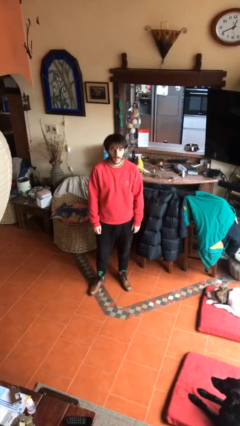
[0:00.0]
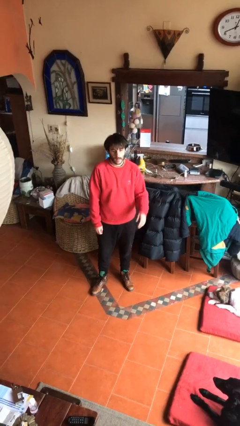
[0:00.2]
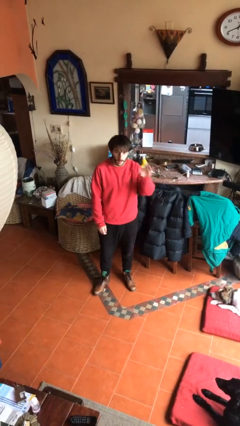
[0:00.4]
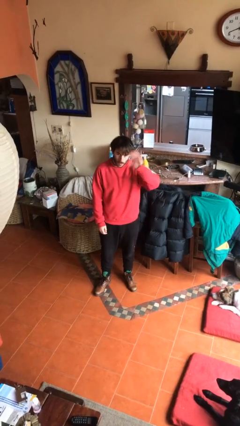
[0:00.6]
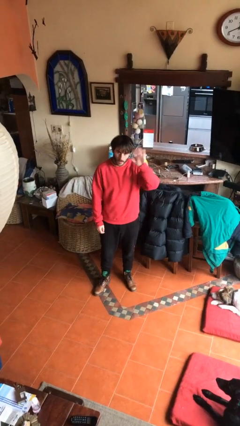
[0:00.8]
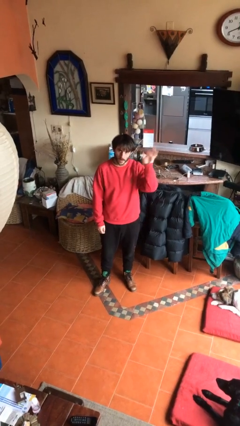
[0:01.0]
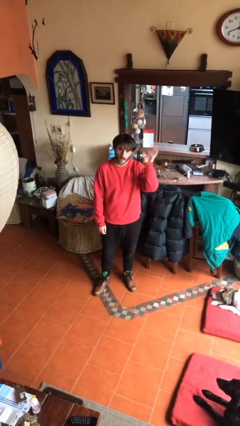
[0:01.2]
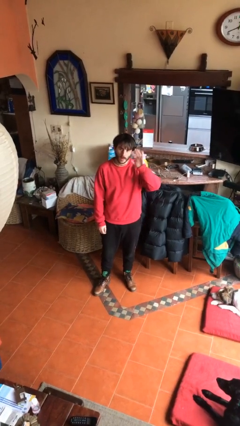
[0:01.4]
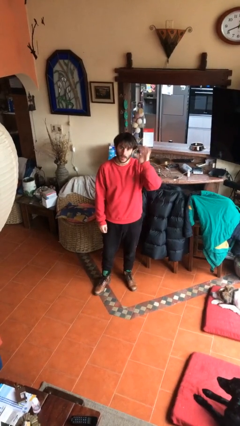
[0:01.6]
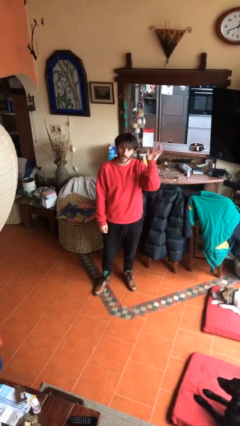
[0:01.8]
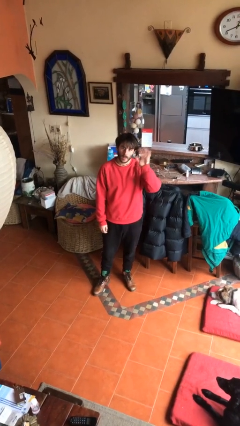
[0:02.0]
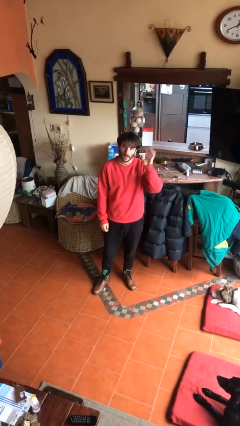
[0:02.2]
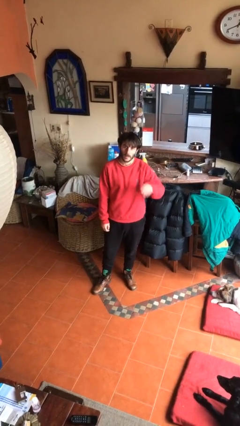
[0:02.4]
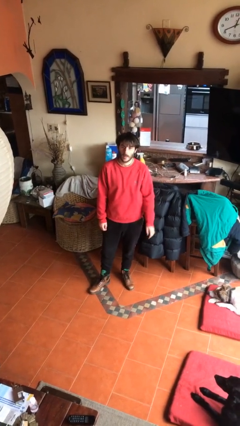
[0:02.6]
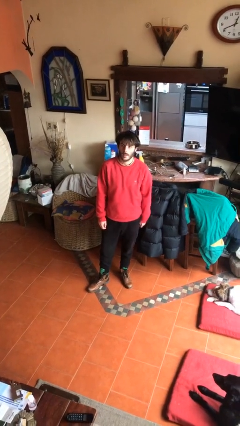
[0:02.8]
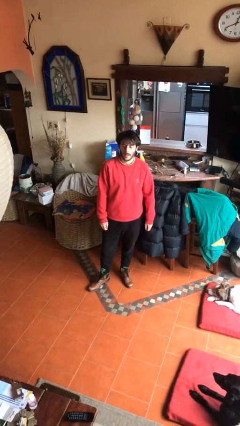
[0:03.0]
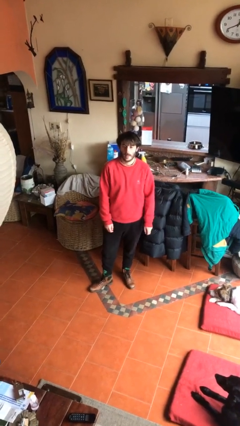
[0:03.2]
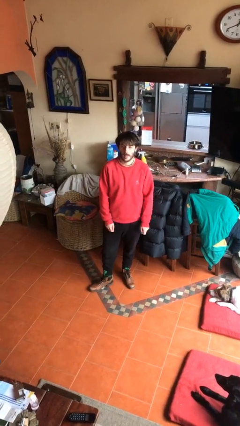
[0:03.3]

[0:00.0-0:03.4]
person waves at person

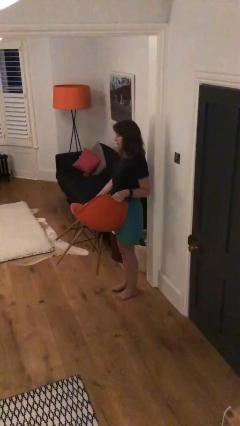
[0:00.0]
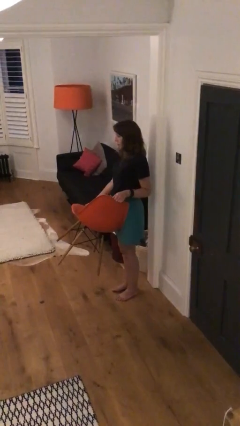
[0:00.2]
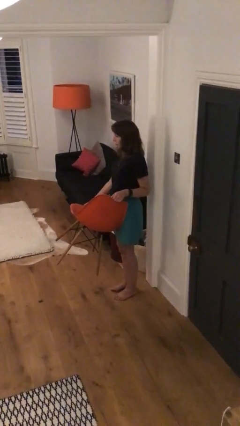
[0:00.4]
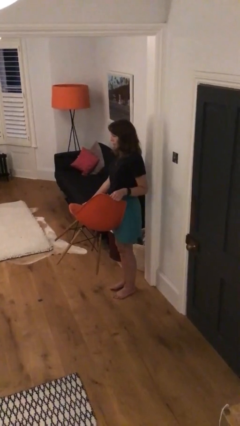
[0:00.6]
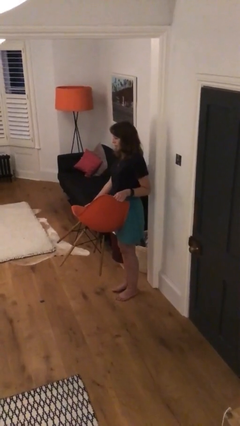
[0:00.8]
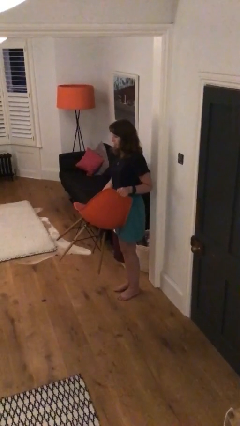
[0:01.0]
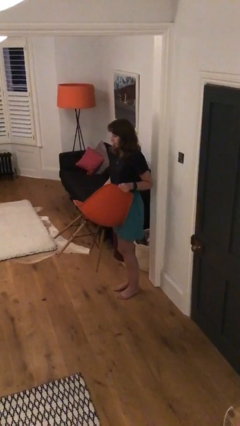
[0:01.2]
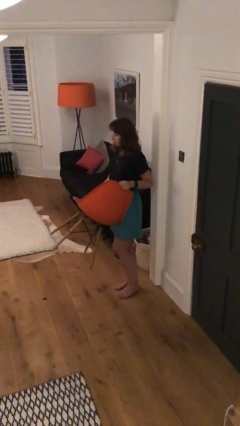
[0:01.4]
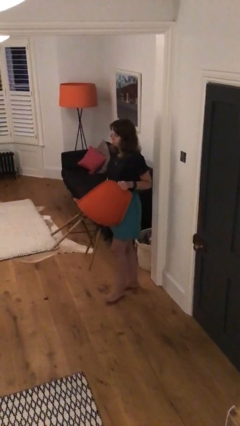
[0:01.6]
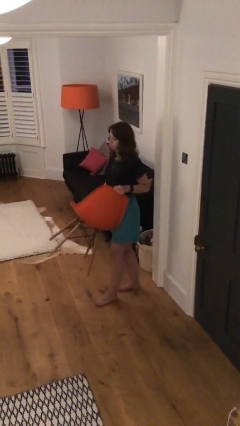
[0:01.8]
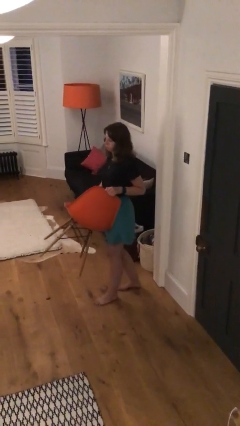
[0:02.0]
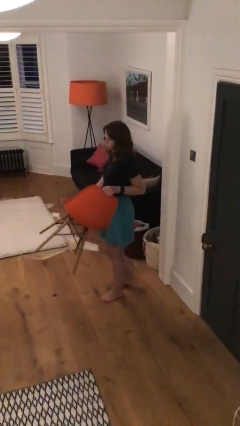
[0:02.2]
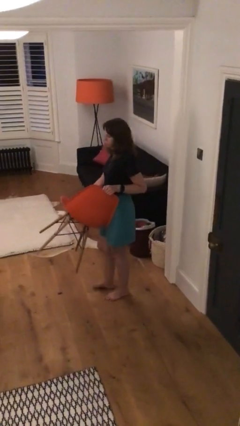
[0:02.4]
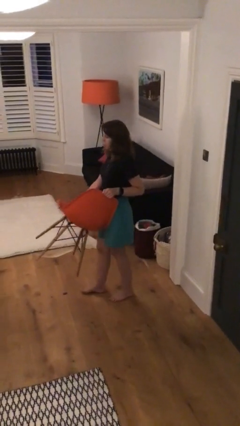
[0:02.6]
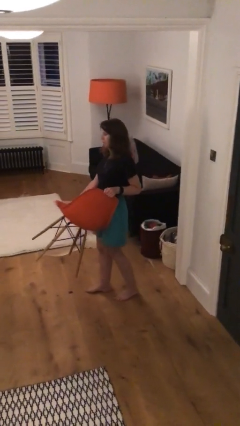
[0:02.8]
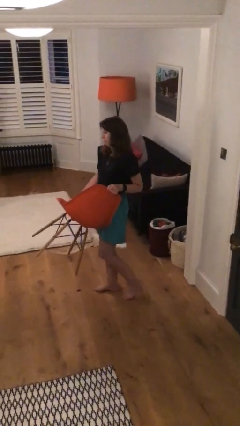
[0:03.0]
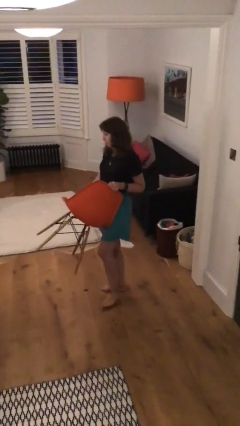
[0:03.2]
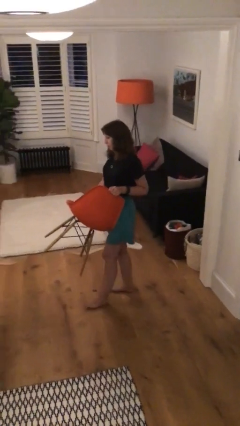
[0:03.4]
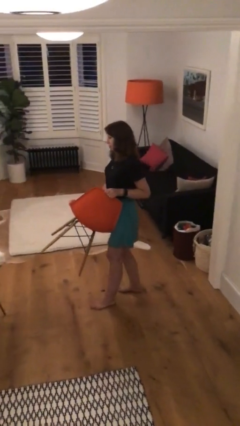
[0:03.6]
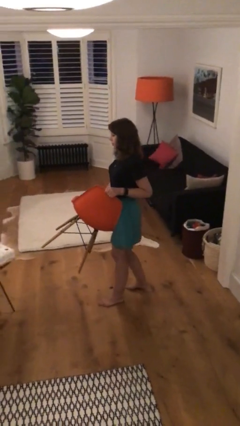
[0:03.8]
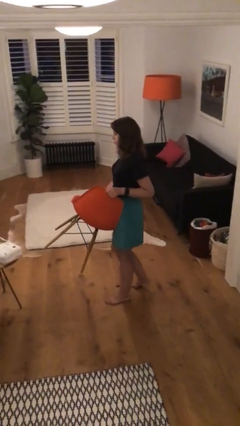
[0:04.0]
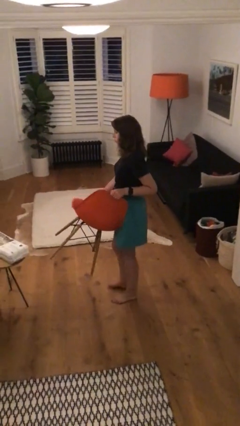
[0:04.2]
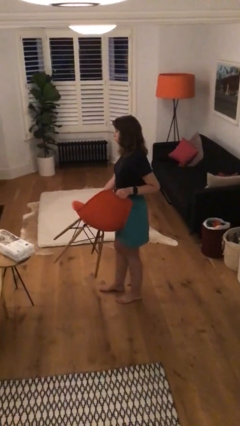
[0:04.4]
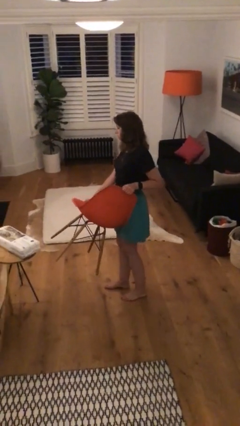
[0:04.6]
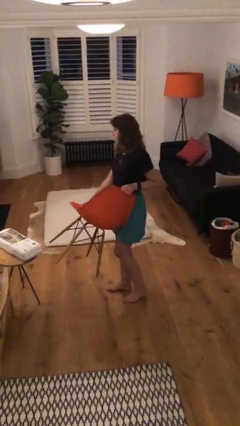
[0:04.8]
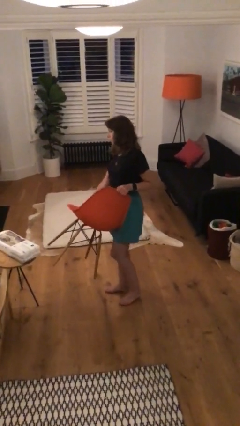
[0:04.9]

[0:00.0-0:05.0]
person carries heavy object

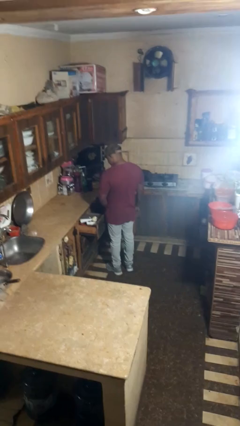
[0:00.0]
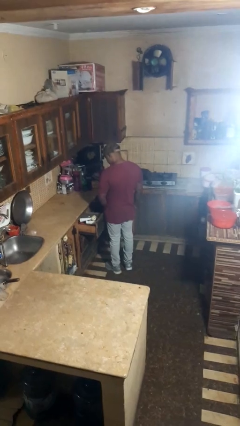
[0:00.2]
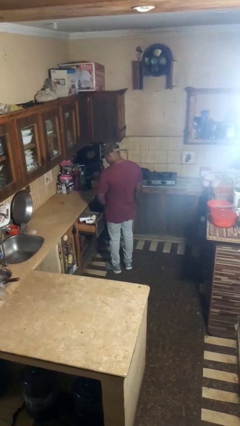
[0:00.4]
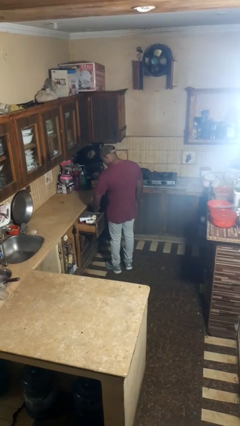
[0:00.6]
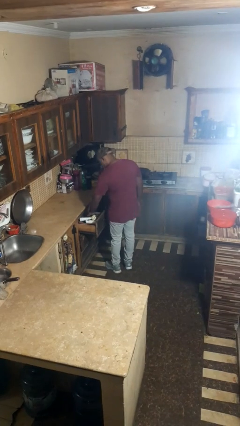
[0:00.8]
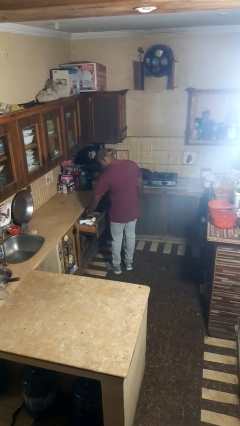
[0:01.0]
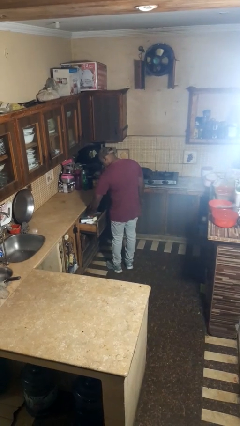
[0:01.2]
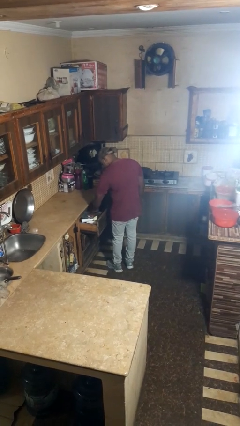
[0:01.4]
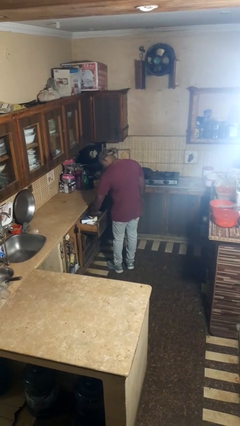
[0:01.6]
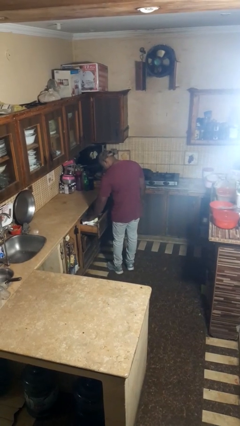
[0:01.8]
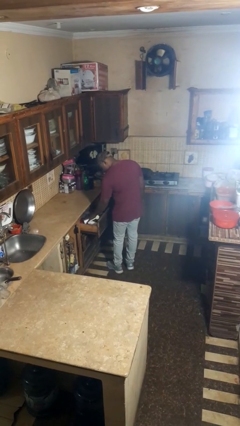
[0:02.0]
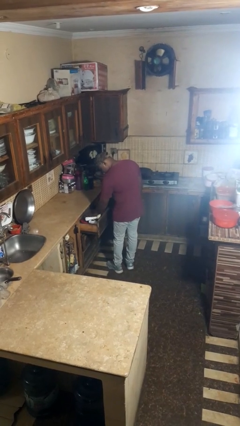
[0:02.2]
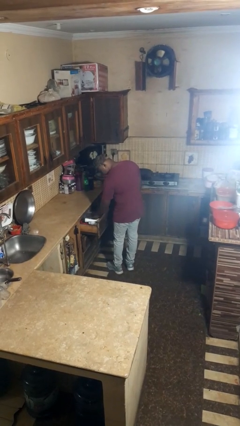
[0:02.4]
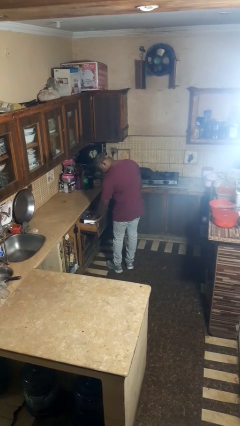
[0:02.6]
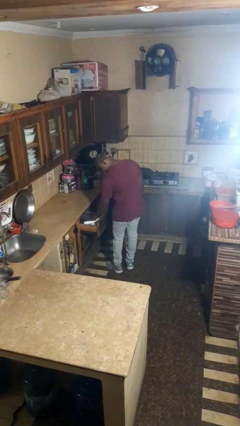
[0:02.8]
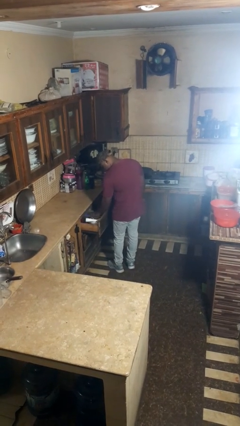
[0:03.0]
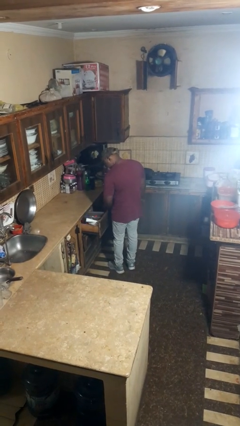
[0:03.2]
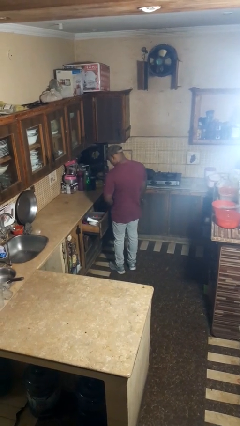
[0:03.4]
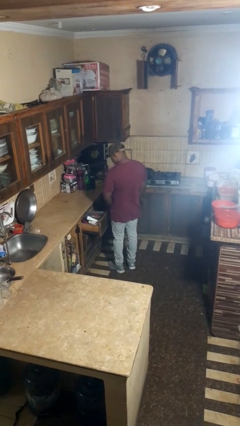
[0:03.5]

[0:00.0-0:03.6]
person searches in kitchen drawer

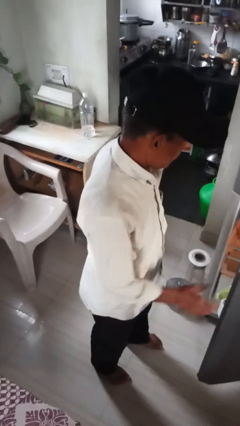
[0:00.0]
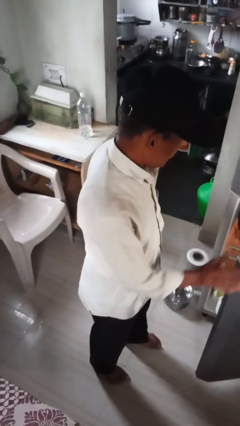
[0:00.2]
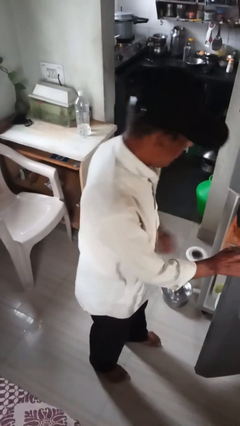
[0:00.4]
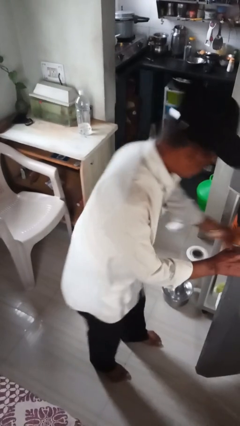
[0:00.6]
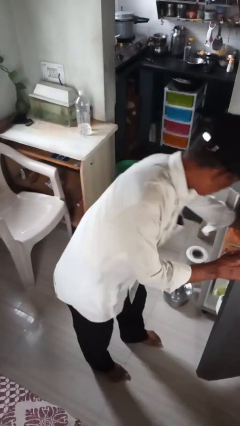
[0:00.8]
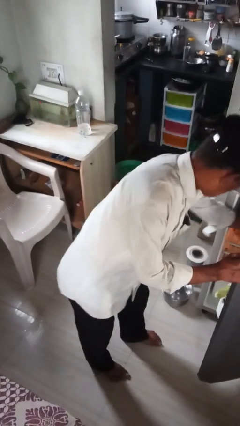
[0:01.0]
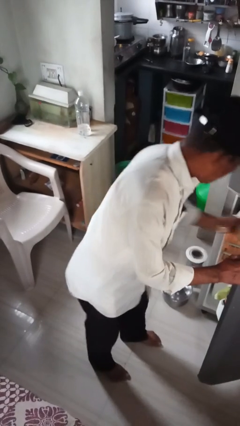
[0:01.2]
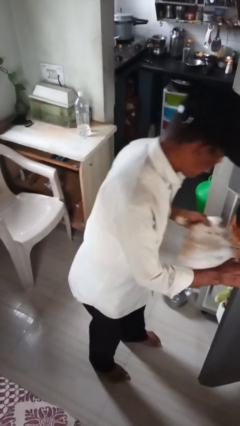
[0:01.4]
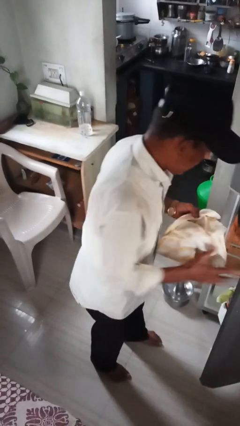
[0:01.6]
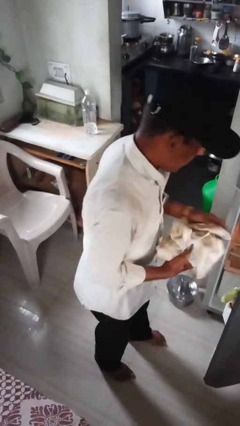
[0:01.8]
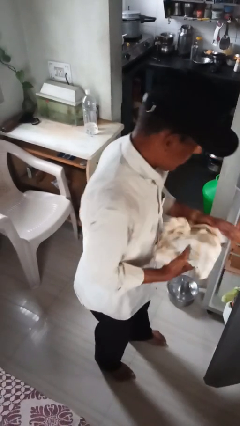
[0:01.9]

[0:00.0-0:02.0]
person unloads clotheswasher

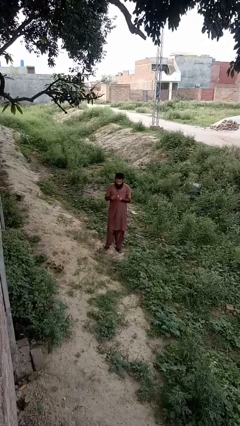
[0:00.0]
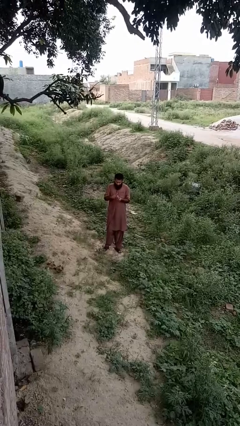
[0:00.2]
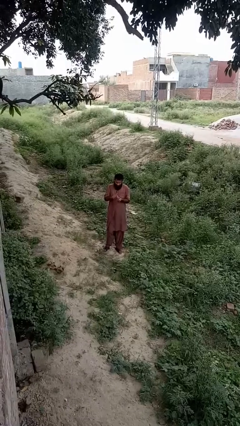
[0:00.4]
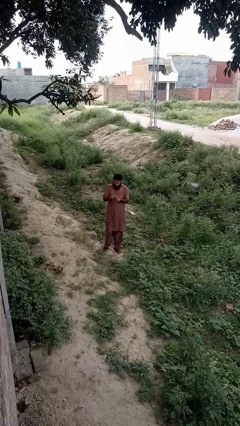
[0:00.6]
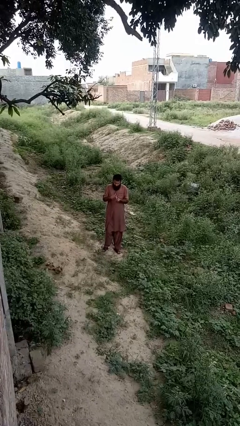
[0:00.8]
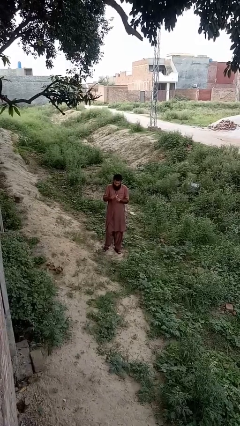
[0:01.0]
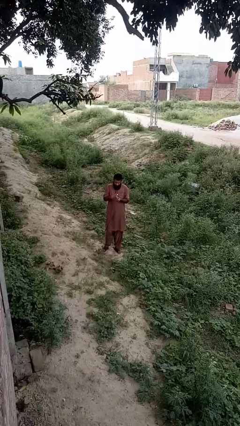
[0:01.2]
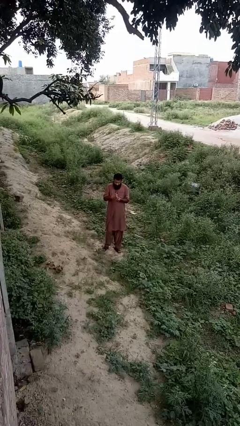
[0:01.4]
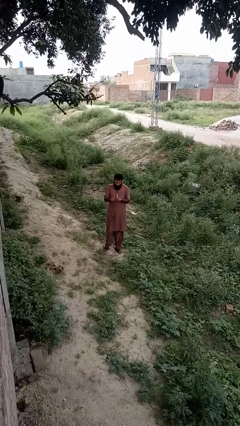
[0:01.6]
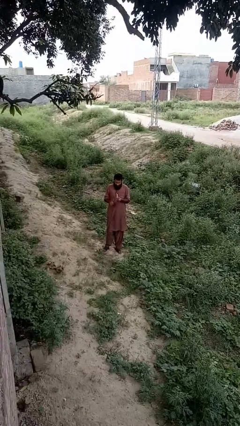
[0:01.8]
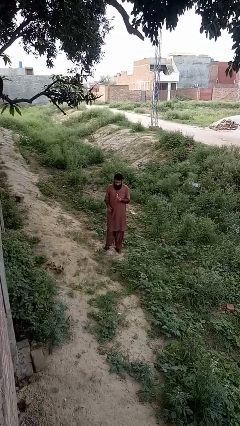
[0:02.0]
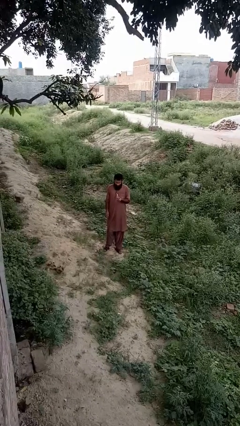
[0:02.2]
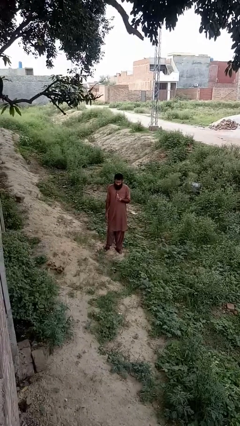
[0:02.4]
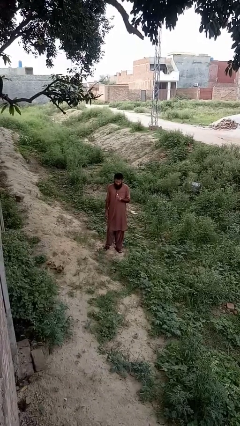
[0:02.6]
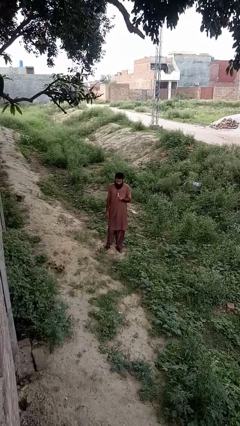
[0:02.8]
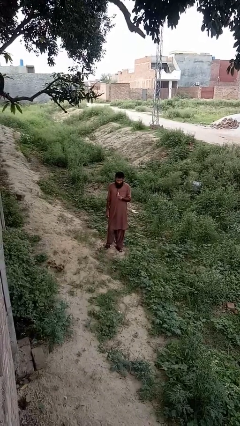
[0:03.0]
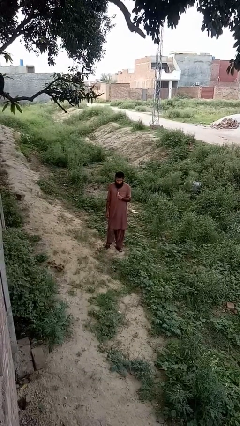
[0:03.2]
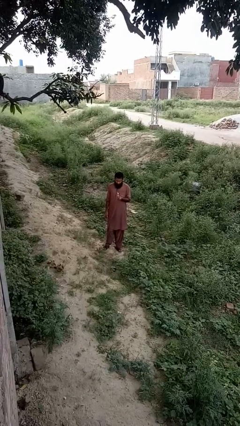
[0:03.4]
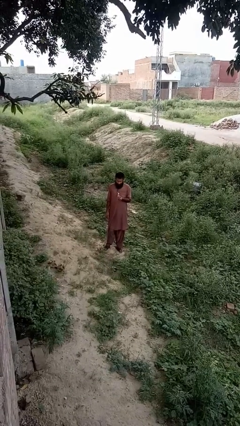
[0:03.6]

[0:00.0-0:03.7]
person lights candle
